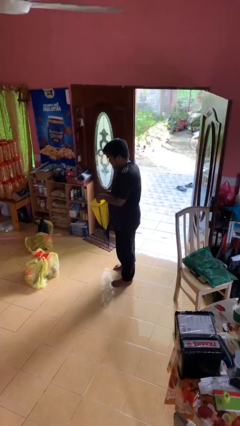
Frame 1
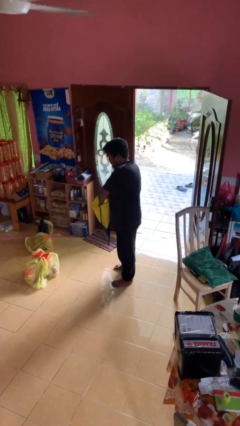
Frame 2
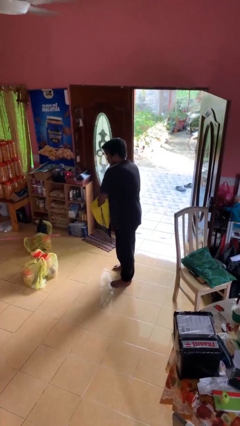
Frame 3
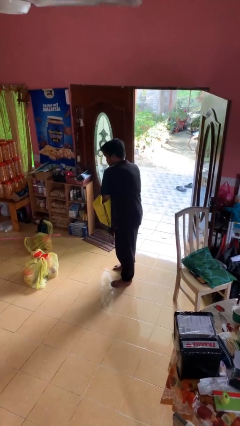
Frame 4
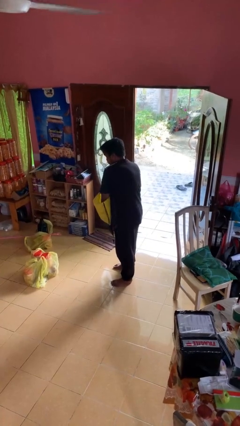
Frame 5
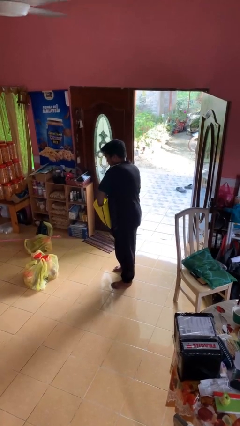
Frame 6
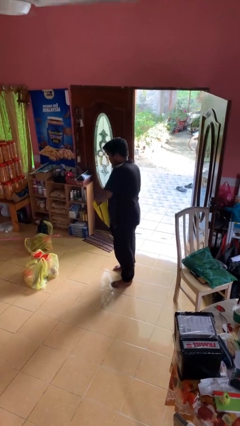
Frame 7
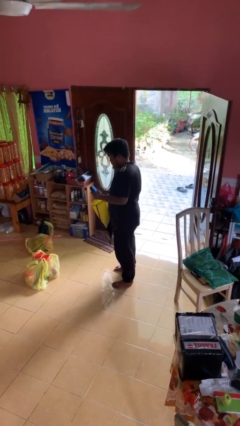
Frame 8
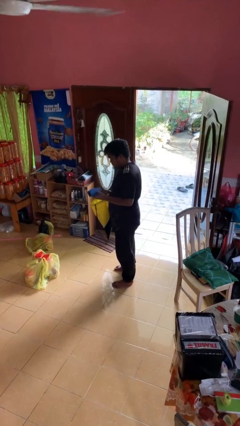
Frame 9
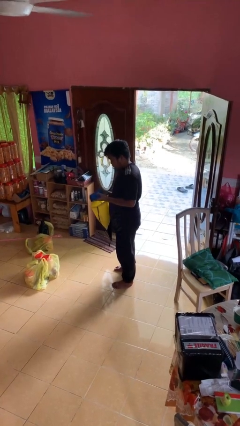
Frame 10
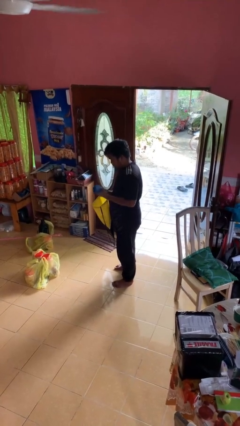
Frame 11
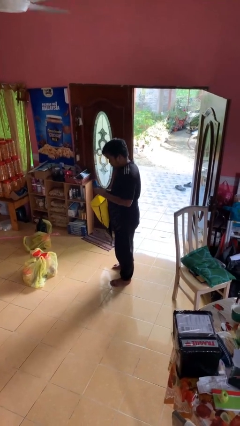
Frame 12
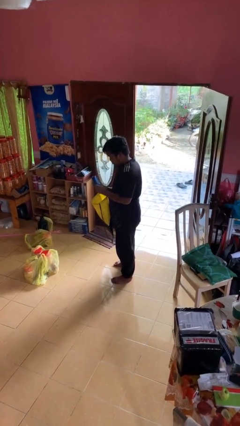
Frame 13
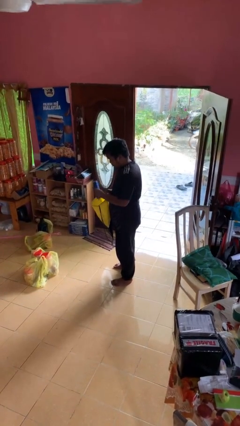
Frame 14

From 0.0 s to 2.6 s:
person takes object from bag

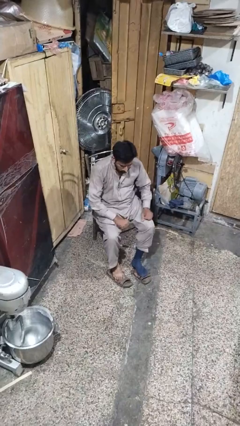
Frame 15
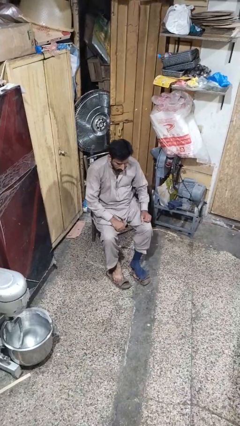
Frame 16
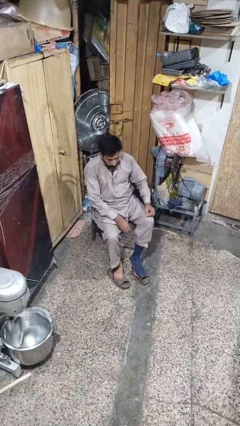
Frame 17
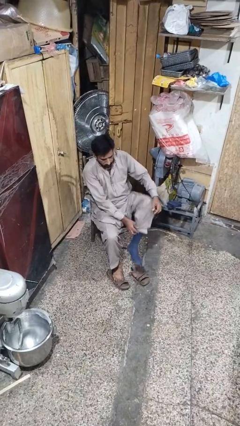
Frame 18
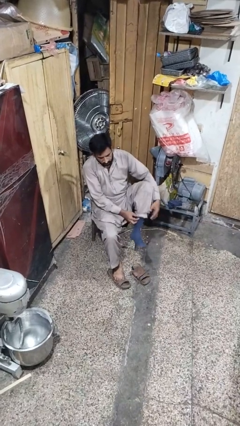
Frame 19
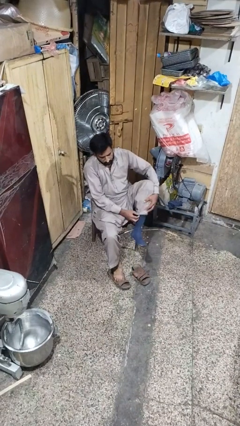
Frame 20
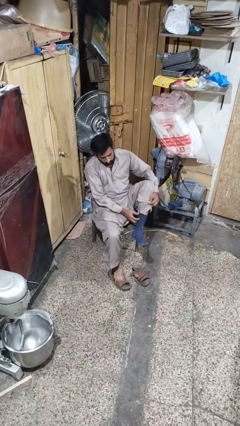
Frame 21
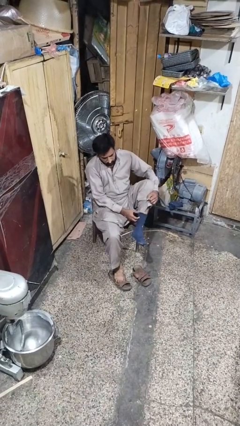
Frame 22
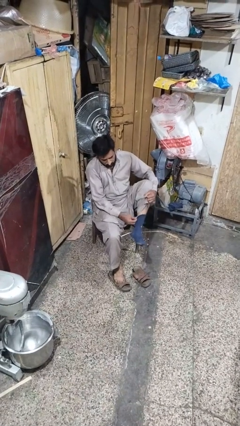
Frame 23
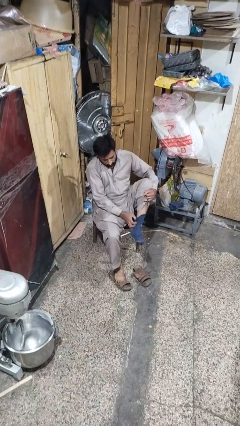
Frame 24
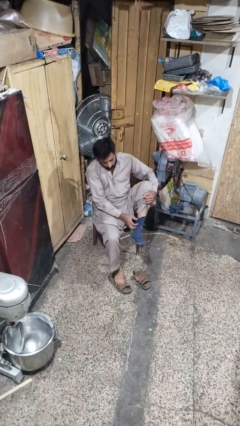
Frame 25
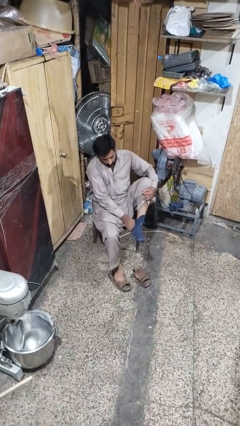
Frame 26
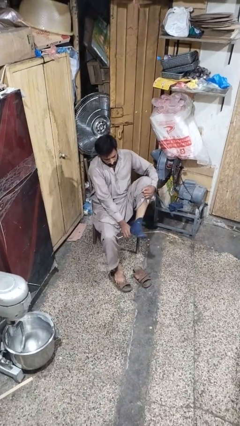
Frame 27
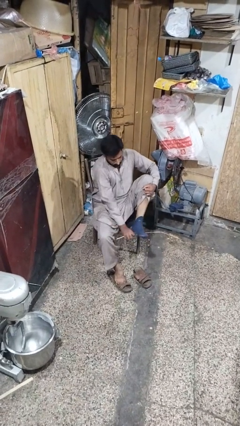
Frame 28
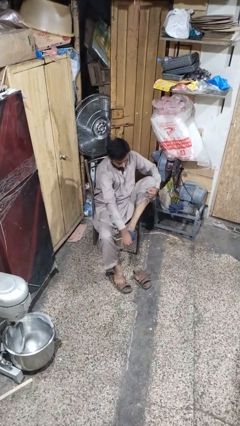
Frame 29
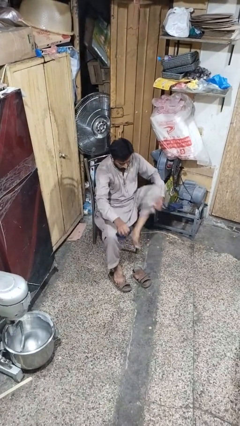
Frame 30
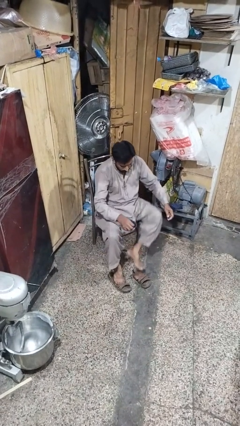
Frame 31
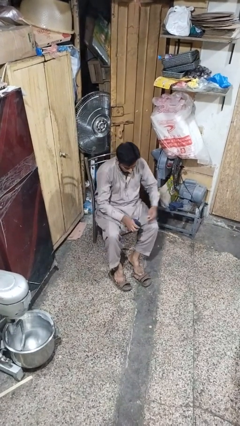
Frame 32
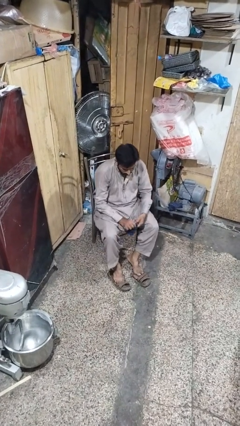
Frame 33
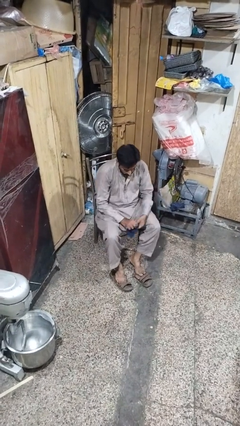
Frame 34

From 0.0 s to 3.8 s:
person takes off socks

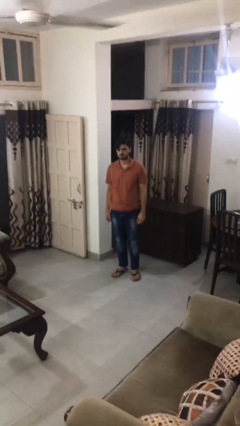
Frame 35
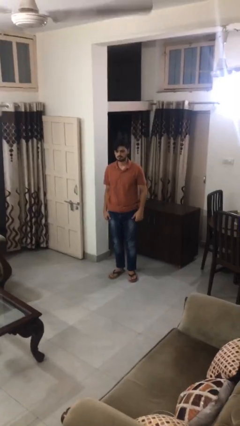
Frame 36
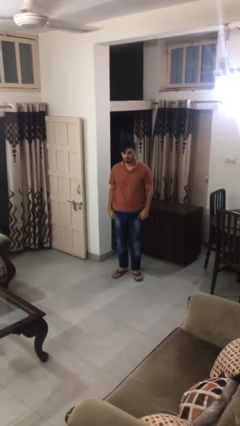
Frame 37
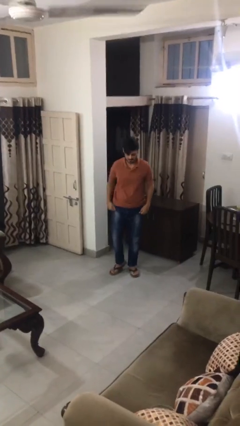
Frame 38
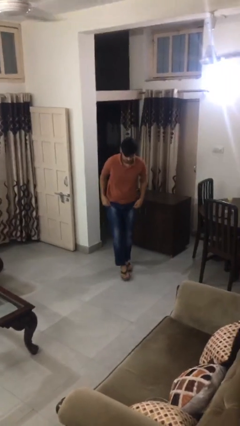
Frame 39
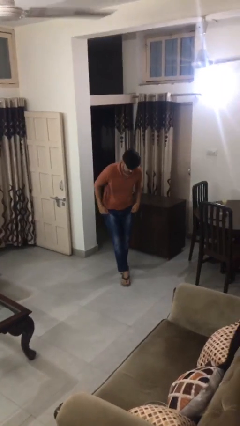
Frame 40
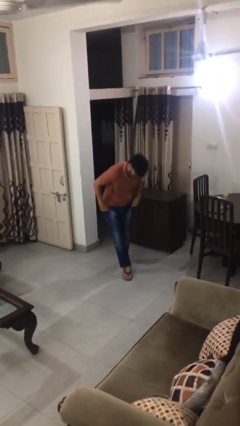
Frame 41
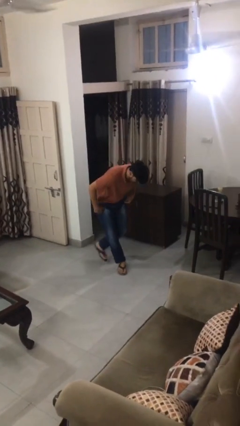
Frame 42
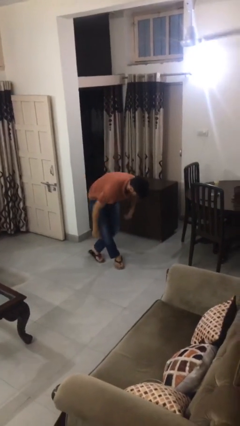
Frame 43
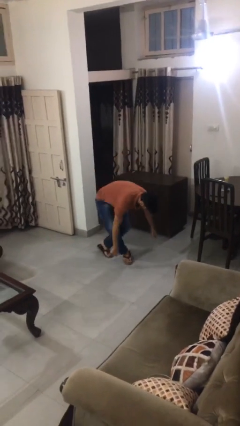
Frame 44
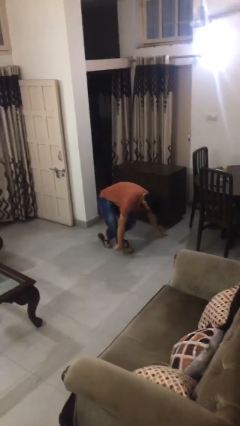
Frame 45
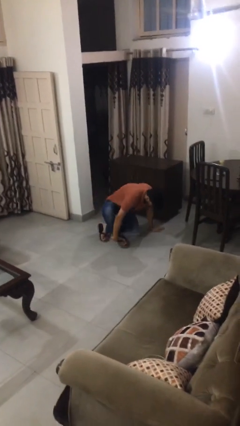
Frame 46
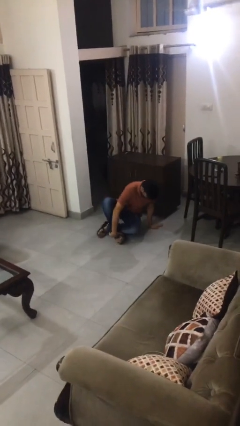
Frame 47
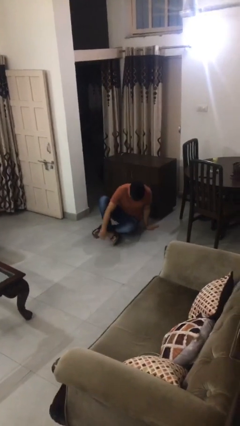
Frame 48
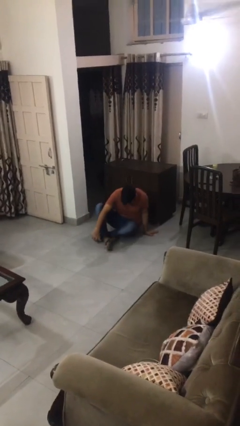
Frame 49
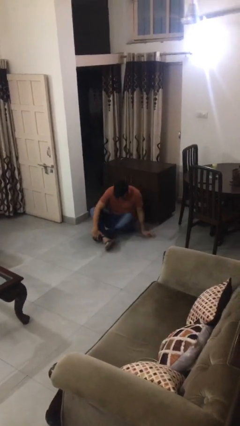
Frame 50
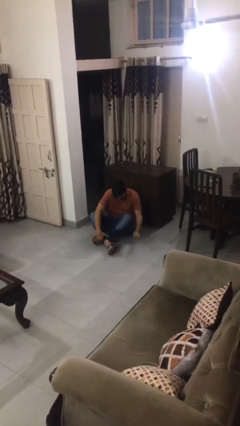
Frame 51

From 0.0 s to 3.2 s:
person sits crisscross

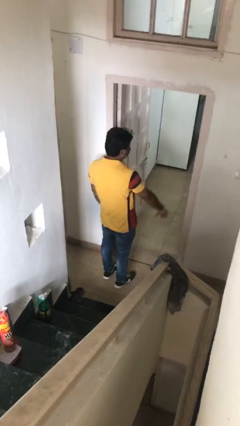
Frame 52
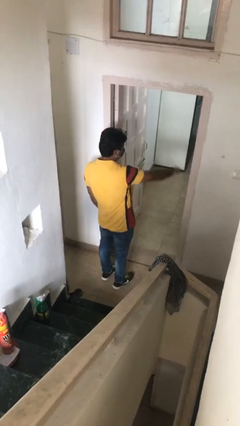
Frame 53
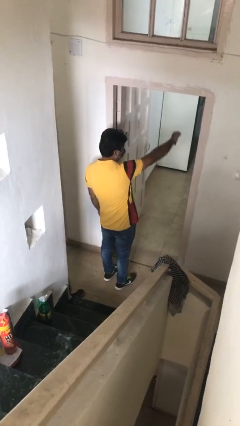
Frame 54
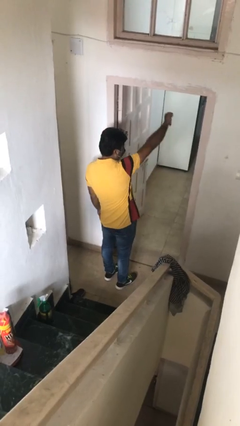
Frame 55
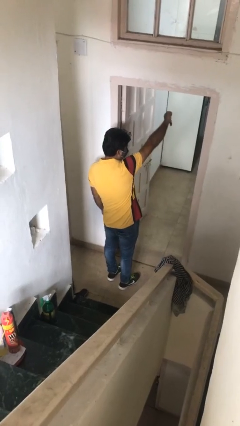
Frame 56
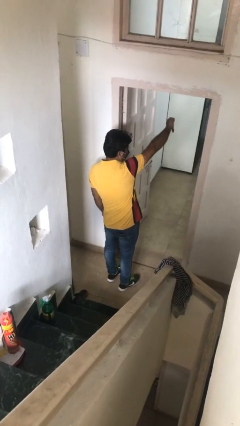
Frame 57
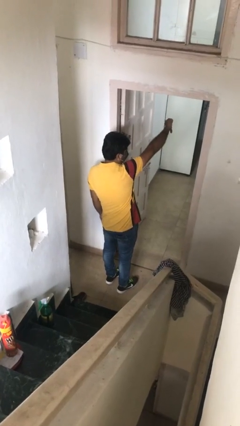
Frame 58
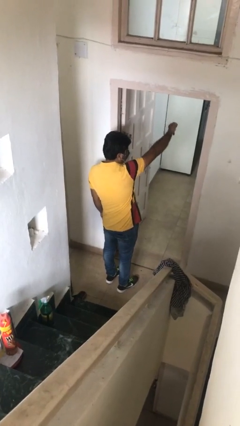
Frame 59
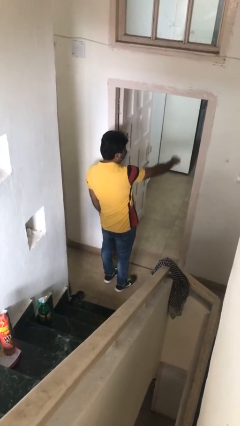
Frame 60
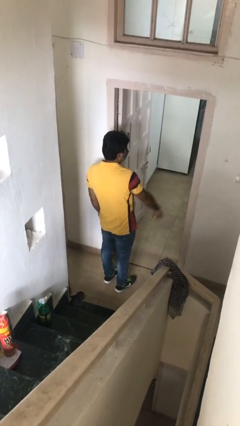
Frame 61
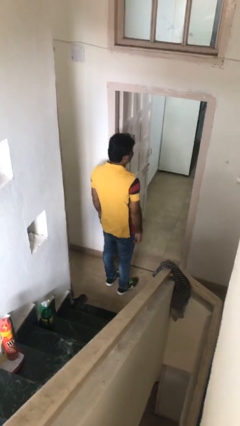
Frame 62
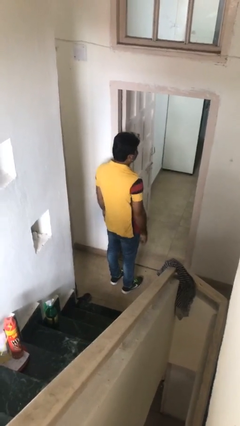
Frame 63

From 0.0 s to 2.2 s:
person gestures thumbs down

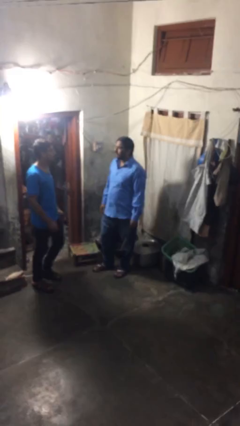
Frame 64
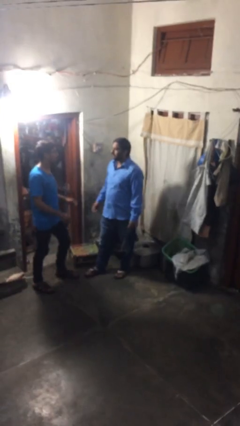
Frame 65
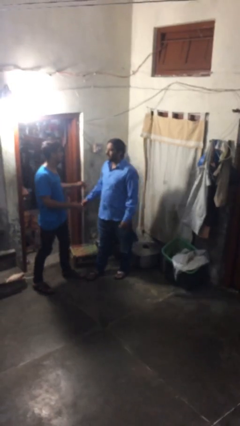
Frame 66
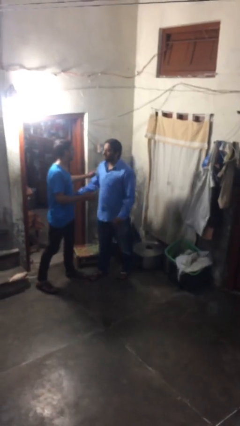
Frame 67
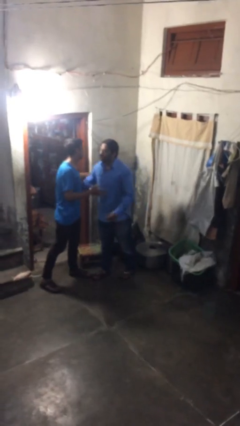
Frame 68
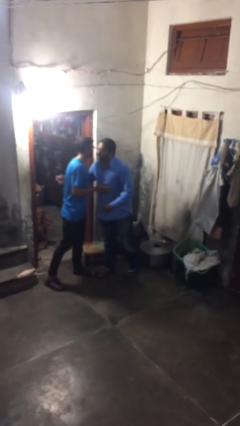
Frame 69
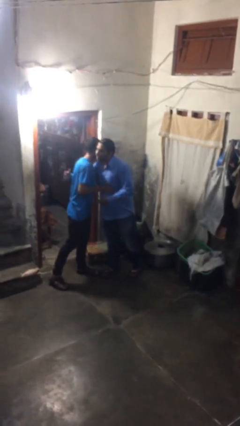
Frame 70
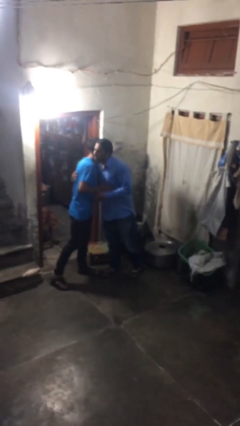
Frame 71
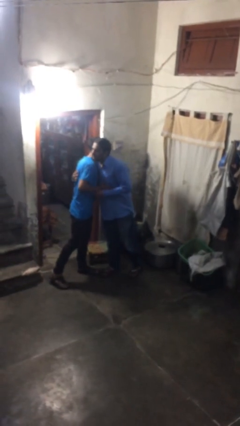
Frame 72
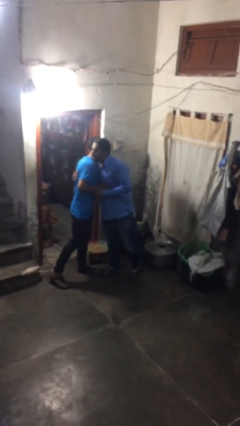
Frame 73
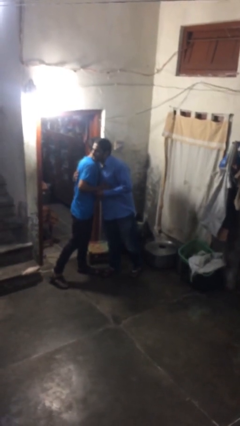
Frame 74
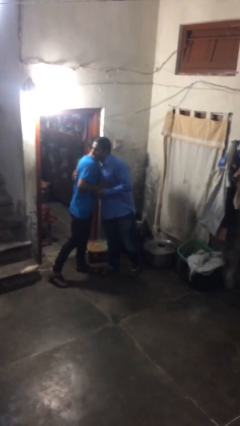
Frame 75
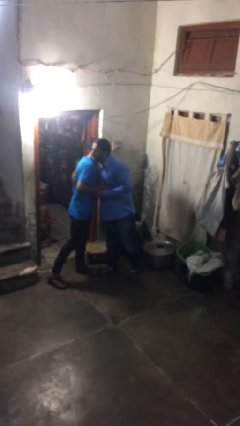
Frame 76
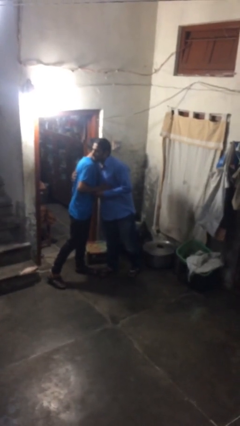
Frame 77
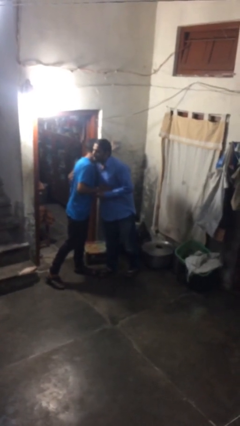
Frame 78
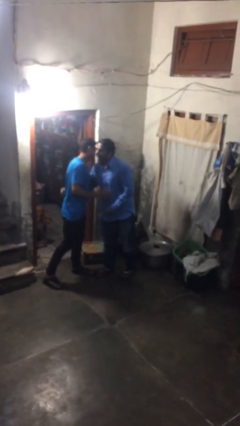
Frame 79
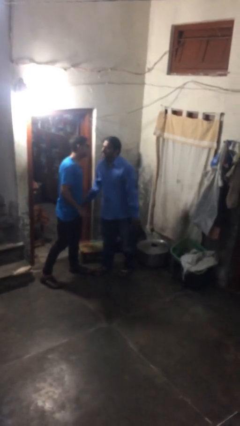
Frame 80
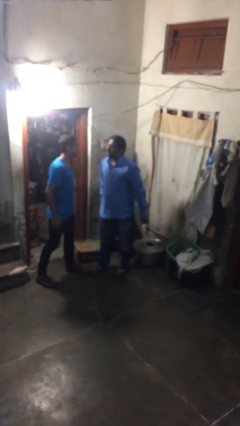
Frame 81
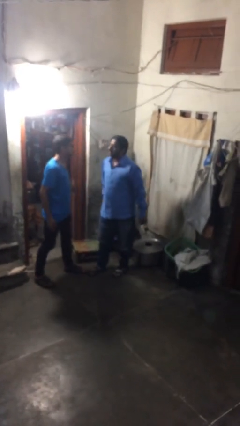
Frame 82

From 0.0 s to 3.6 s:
person embraces person

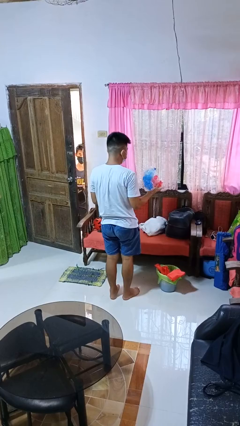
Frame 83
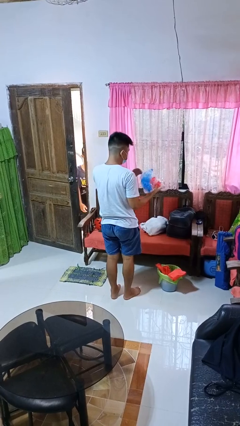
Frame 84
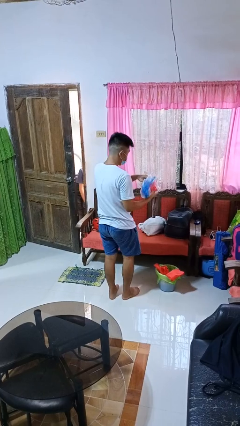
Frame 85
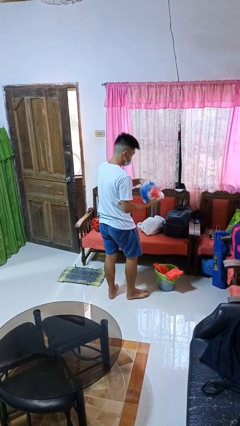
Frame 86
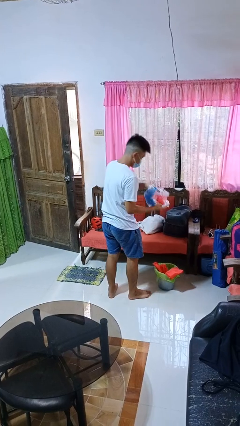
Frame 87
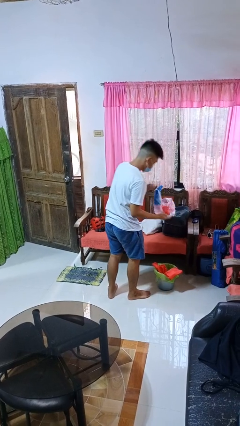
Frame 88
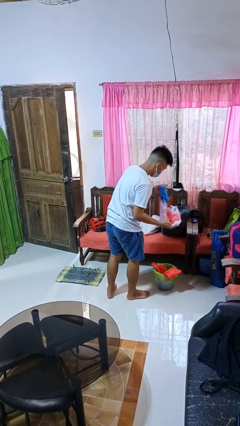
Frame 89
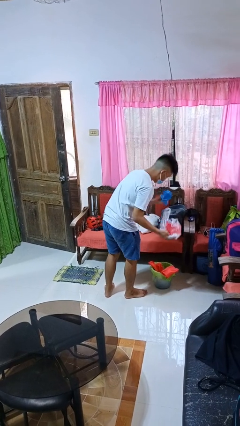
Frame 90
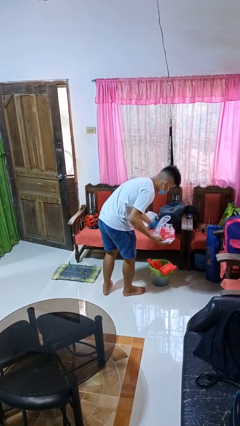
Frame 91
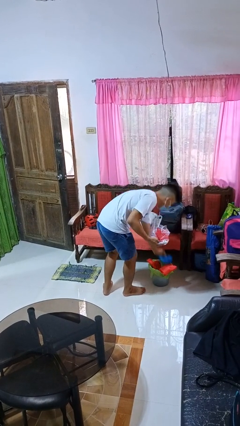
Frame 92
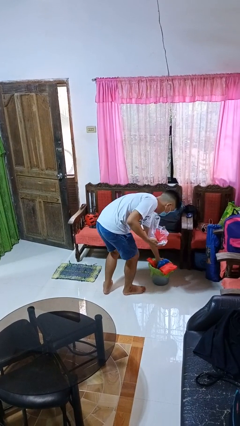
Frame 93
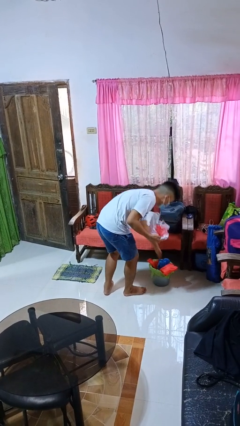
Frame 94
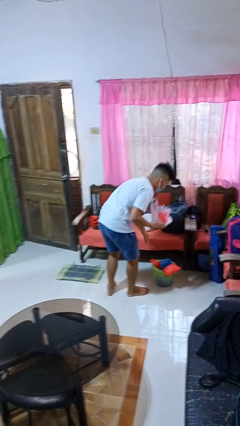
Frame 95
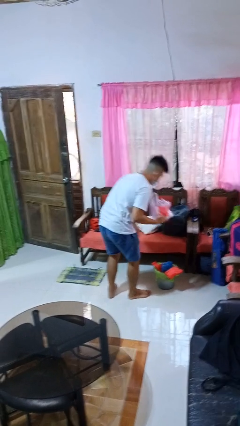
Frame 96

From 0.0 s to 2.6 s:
person discards trash
